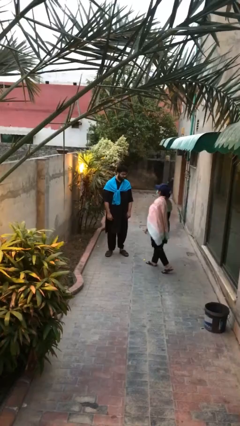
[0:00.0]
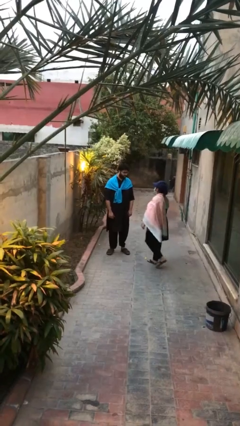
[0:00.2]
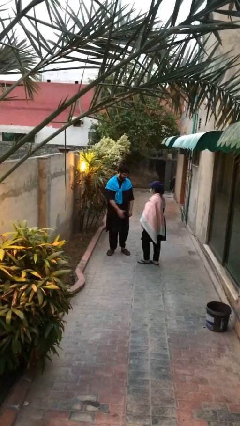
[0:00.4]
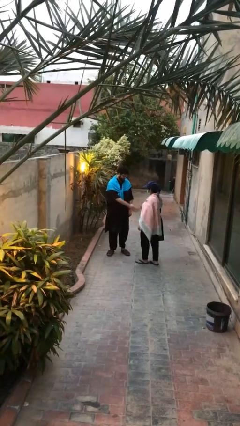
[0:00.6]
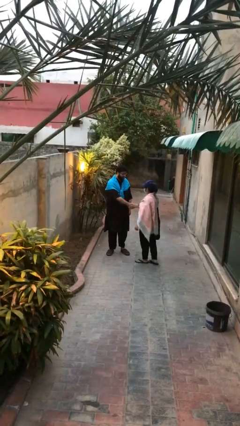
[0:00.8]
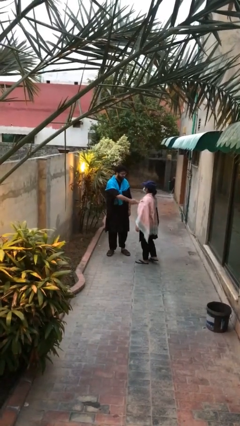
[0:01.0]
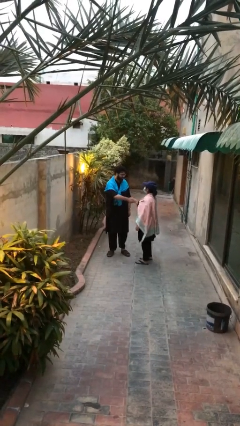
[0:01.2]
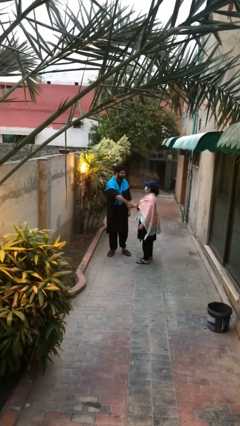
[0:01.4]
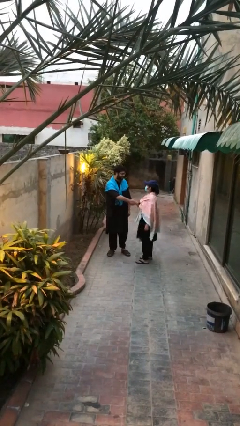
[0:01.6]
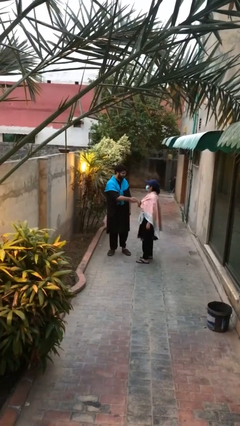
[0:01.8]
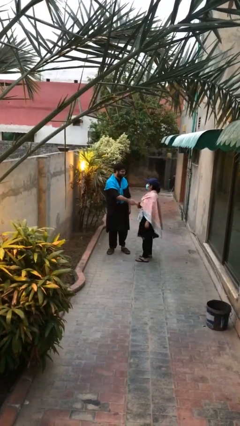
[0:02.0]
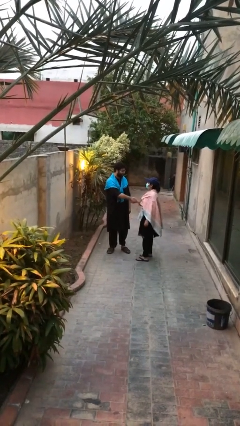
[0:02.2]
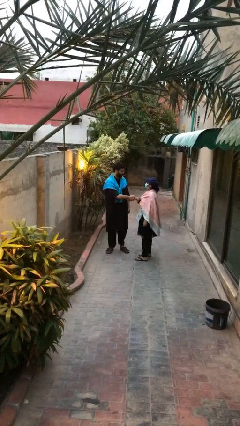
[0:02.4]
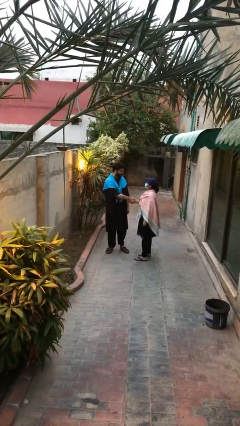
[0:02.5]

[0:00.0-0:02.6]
person shakes hand

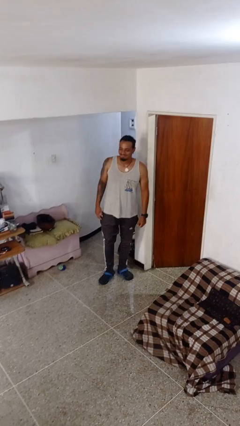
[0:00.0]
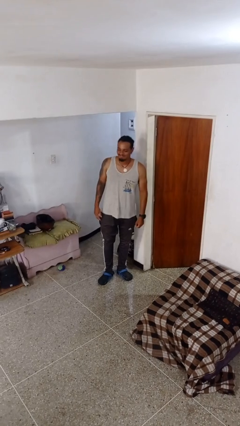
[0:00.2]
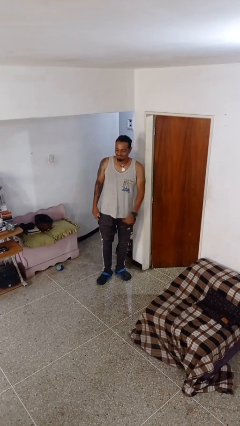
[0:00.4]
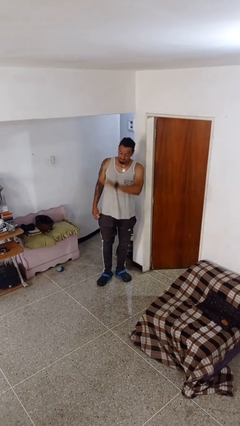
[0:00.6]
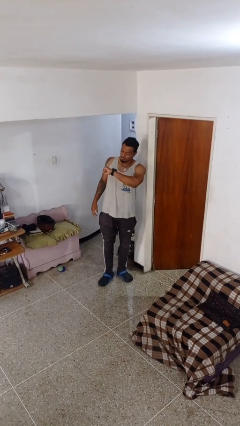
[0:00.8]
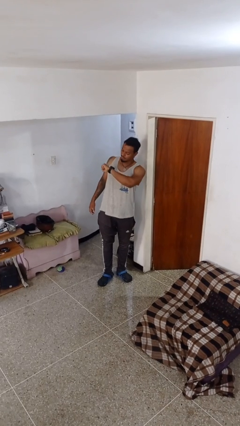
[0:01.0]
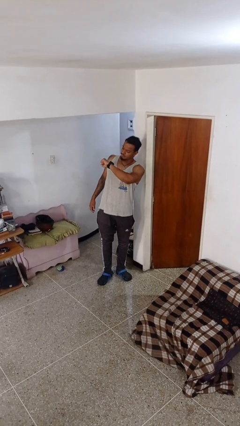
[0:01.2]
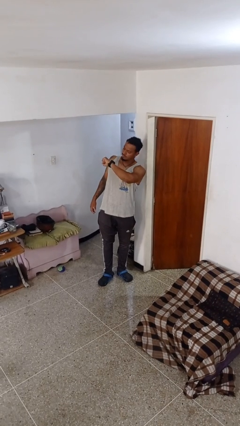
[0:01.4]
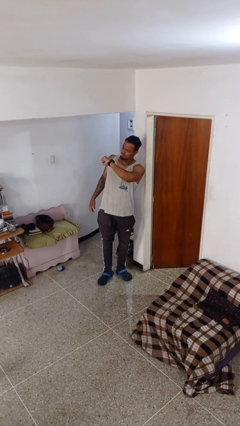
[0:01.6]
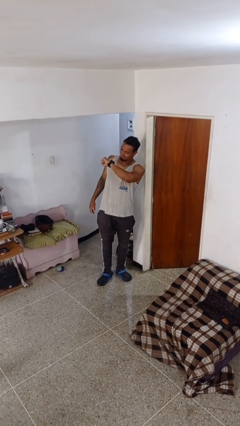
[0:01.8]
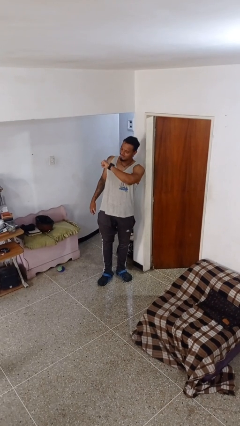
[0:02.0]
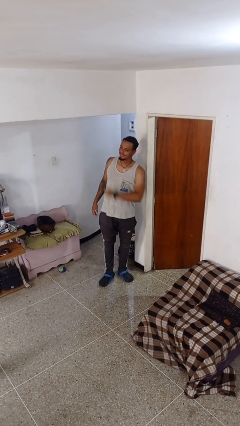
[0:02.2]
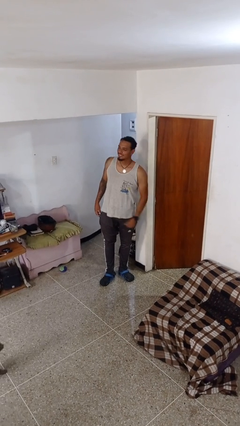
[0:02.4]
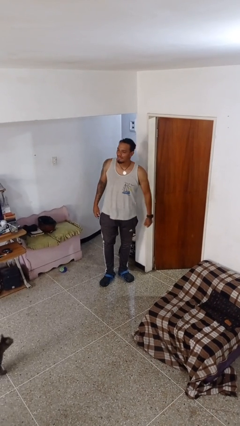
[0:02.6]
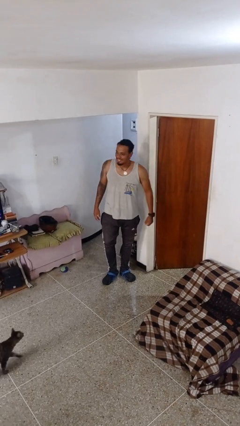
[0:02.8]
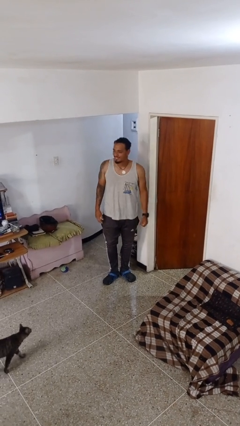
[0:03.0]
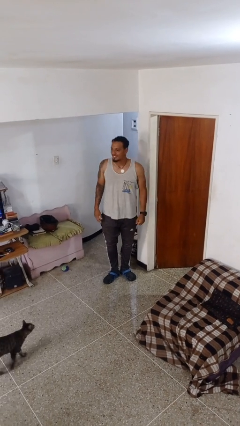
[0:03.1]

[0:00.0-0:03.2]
person looks at wristwatch

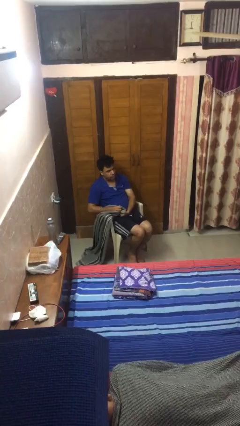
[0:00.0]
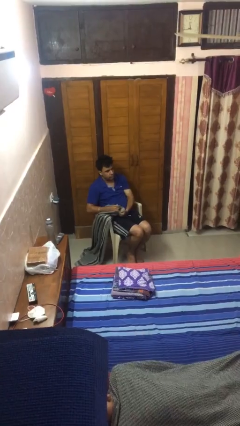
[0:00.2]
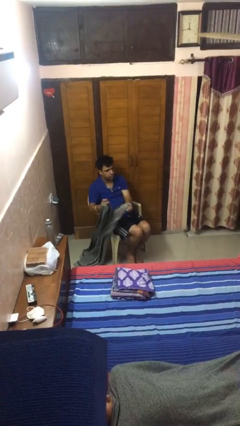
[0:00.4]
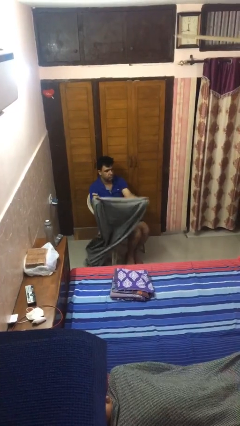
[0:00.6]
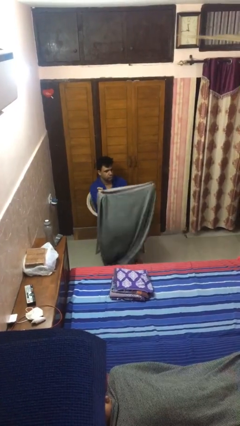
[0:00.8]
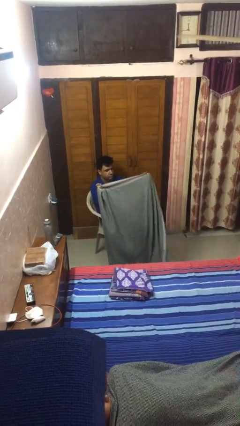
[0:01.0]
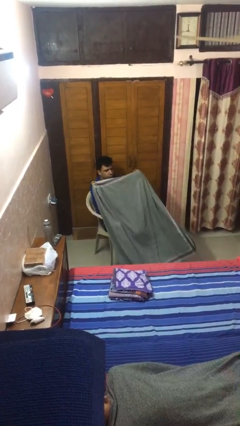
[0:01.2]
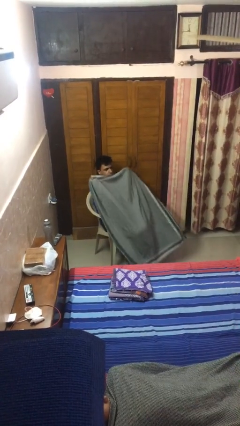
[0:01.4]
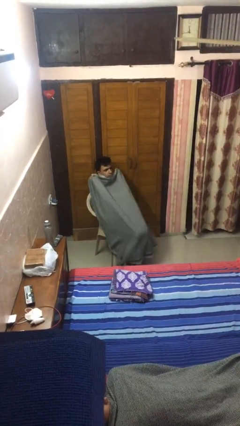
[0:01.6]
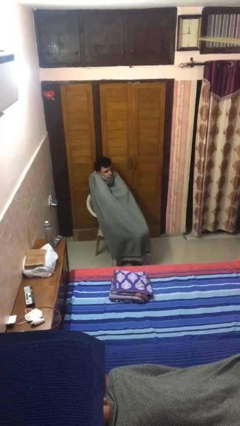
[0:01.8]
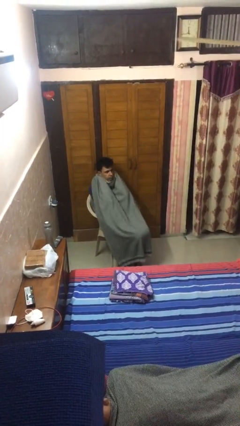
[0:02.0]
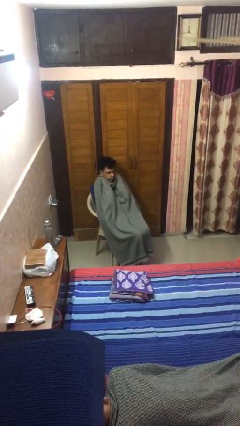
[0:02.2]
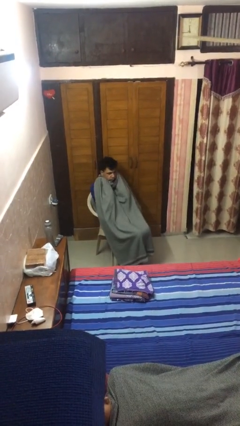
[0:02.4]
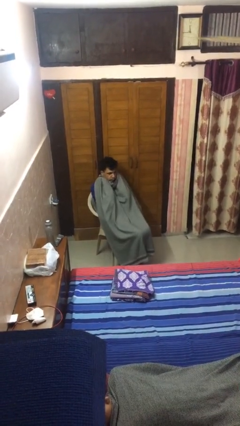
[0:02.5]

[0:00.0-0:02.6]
person covers with blanket

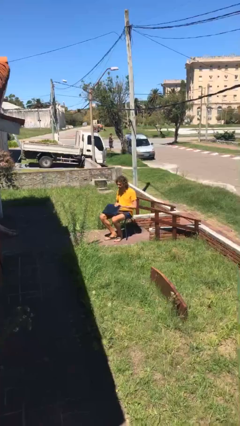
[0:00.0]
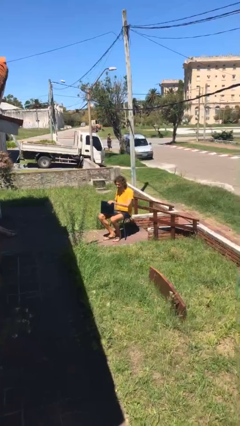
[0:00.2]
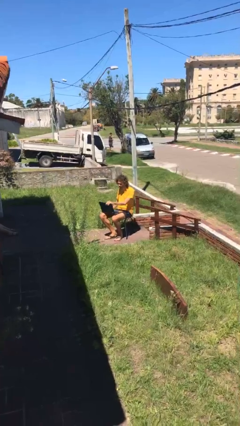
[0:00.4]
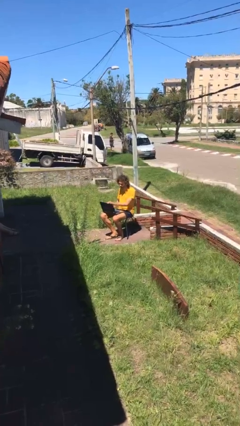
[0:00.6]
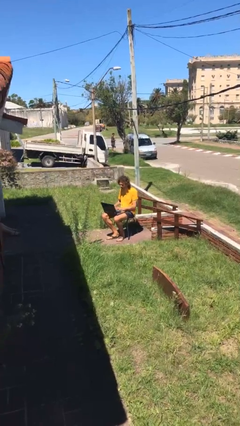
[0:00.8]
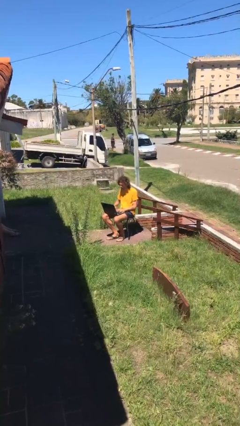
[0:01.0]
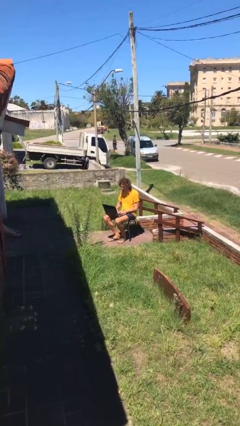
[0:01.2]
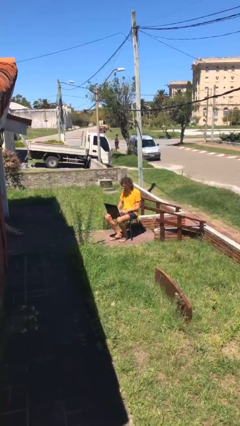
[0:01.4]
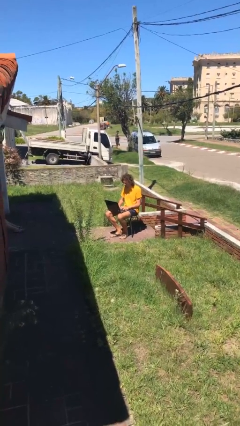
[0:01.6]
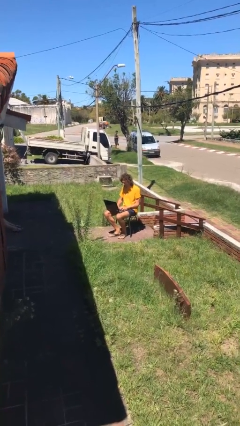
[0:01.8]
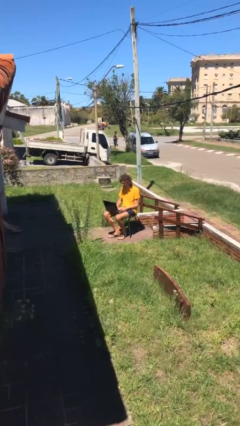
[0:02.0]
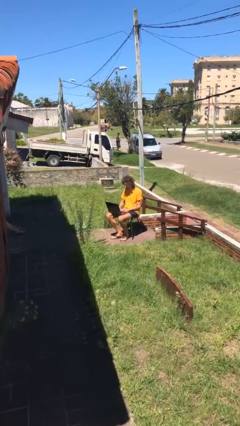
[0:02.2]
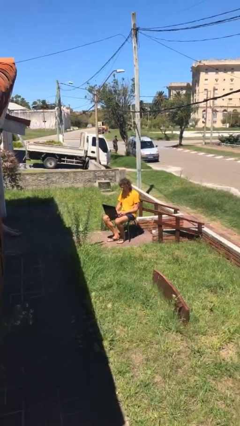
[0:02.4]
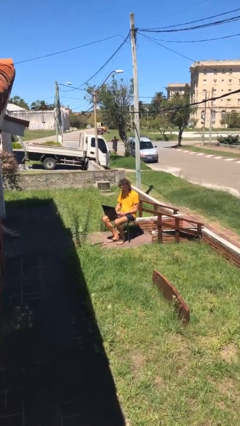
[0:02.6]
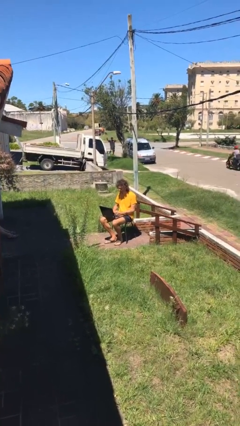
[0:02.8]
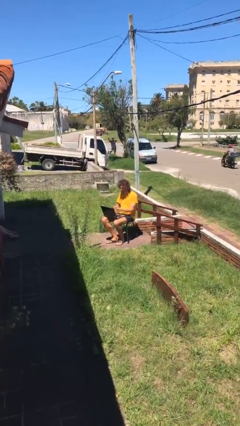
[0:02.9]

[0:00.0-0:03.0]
person interacts with laptop

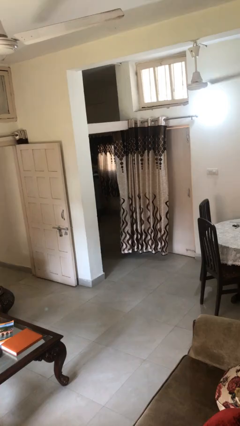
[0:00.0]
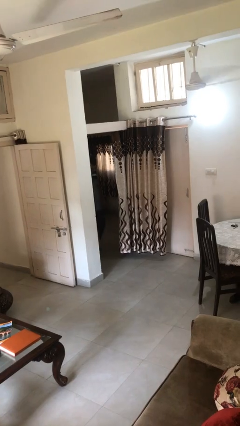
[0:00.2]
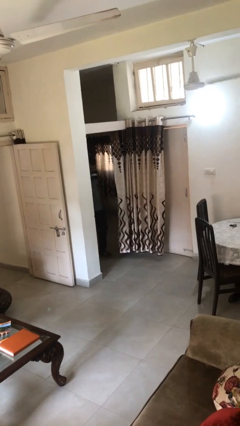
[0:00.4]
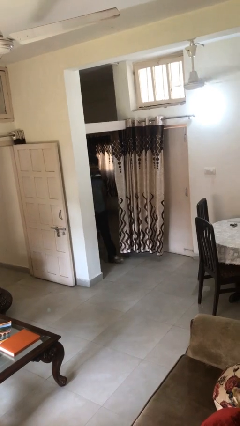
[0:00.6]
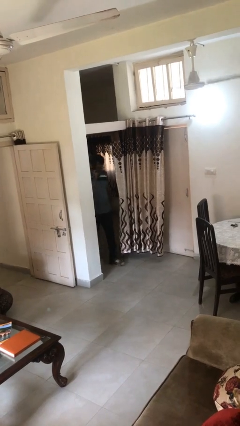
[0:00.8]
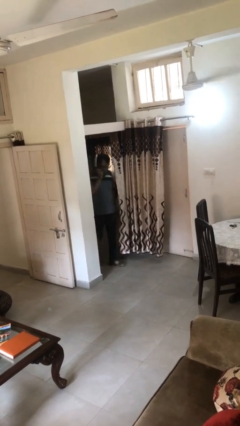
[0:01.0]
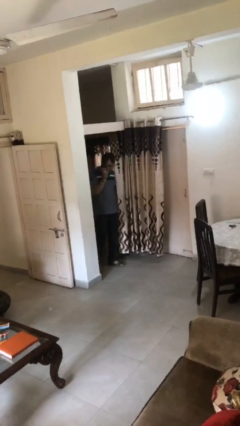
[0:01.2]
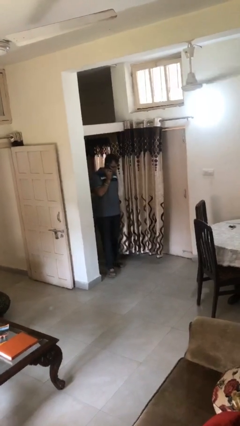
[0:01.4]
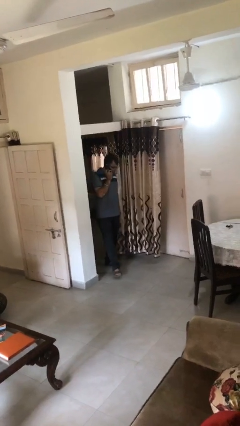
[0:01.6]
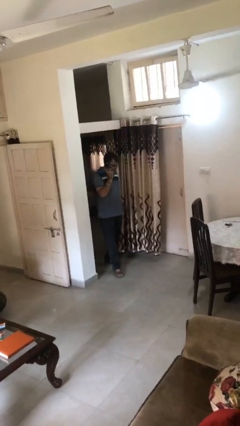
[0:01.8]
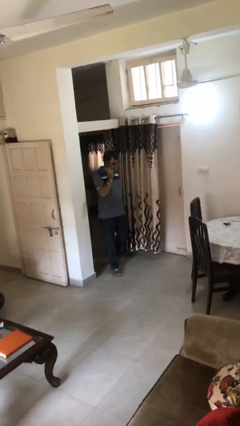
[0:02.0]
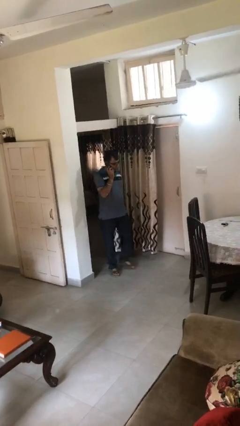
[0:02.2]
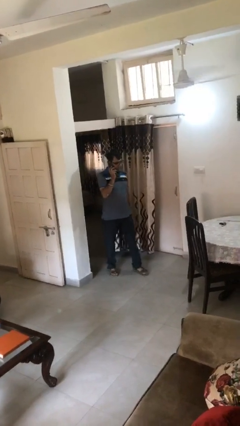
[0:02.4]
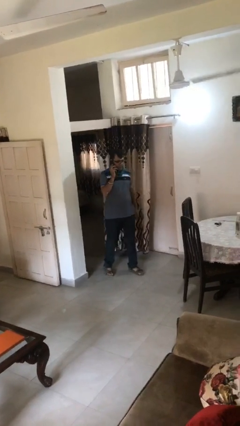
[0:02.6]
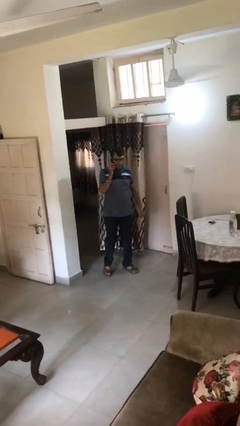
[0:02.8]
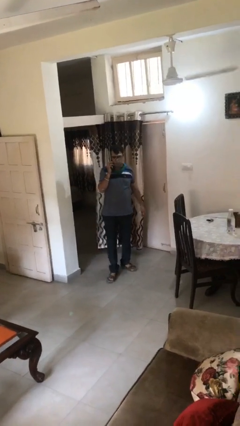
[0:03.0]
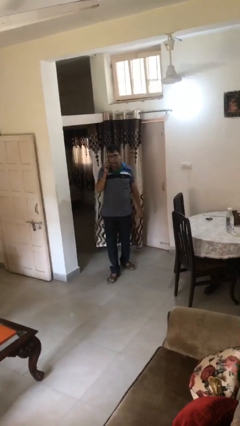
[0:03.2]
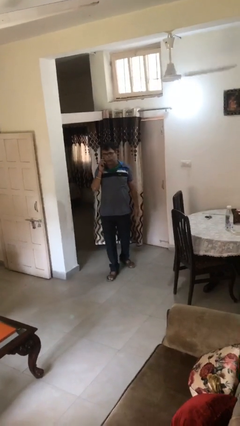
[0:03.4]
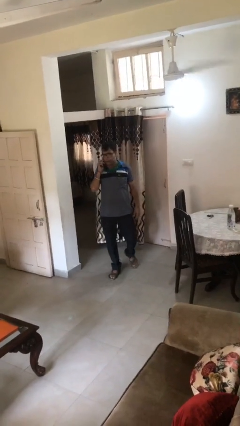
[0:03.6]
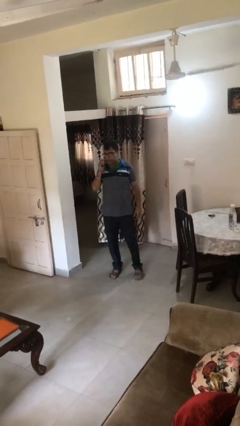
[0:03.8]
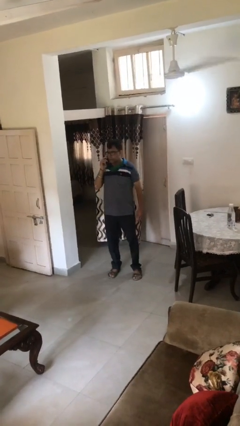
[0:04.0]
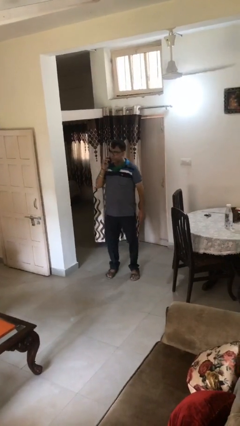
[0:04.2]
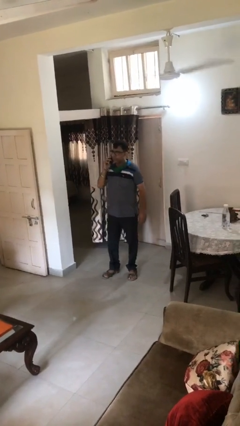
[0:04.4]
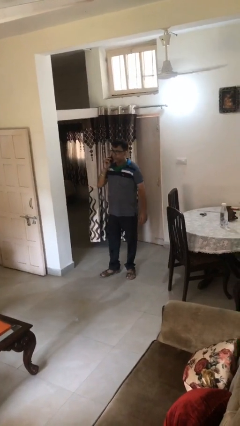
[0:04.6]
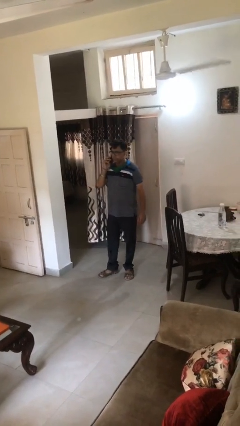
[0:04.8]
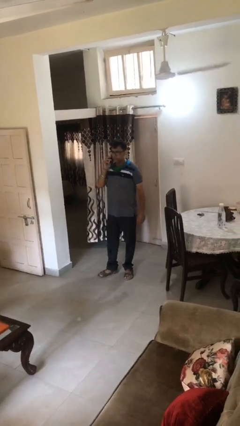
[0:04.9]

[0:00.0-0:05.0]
person enters scene through structure

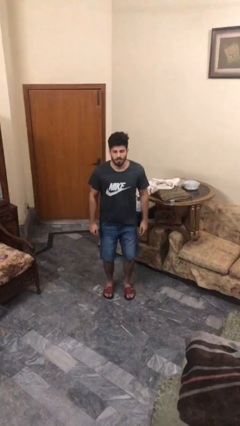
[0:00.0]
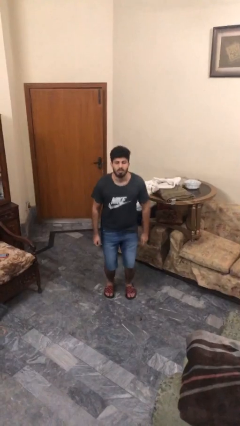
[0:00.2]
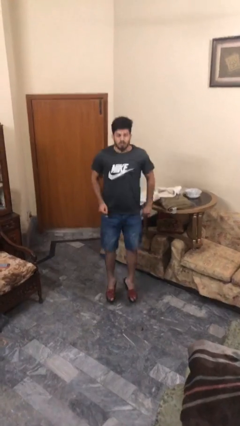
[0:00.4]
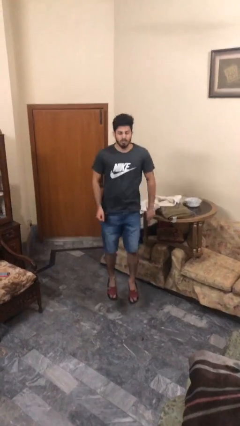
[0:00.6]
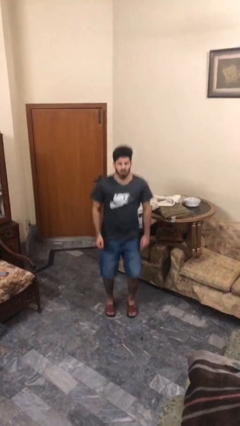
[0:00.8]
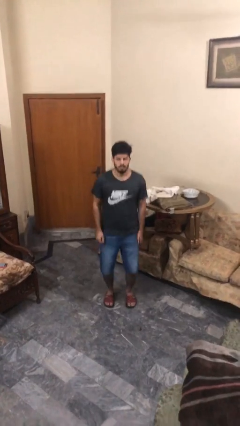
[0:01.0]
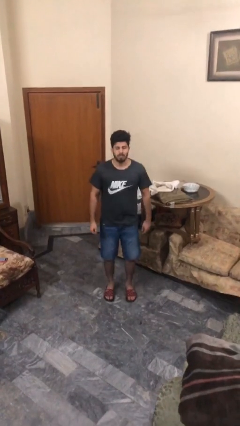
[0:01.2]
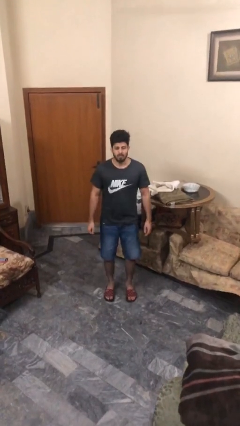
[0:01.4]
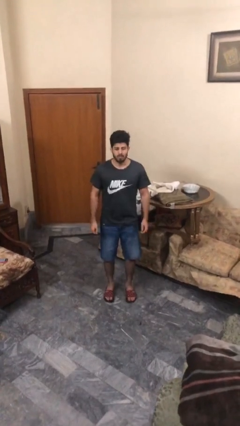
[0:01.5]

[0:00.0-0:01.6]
person jumps
